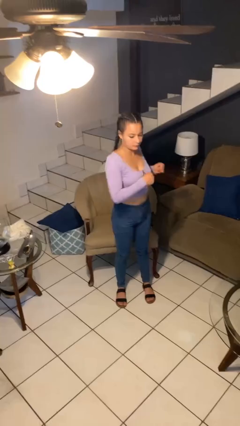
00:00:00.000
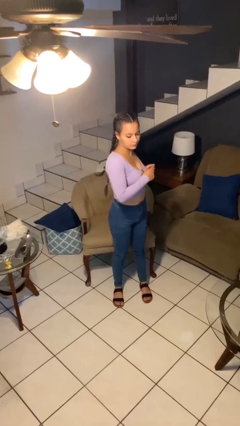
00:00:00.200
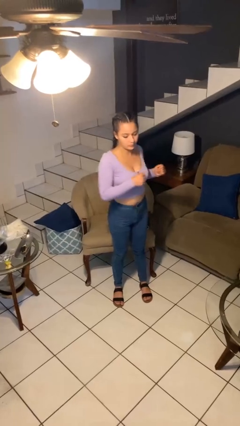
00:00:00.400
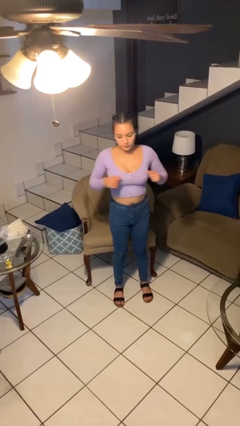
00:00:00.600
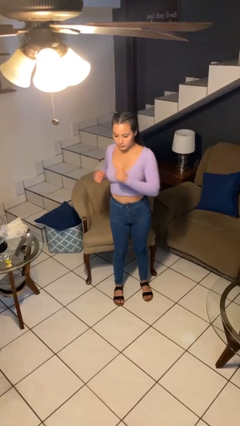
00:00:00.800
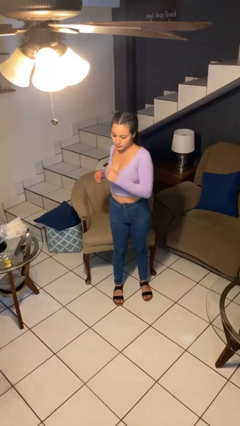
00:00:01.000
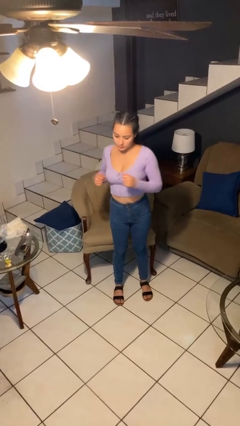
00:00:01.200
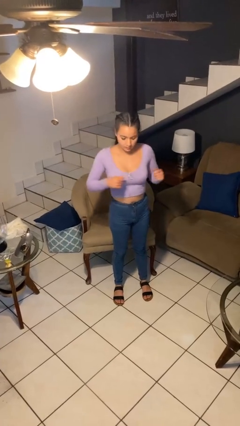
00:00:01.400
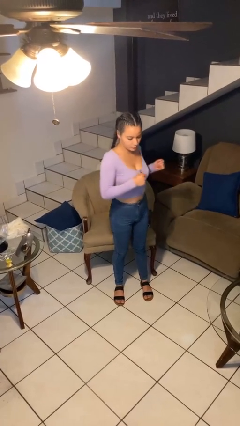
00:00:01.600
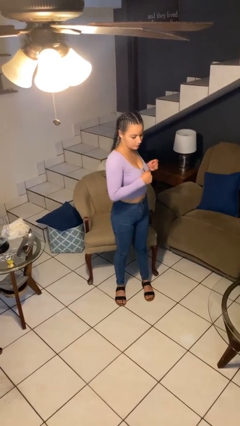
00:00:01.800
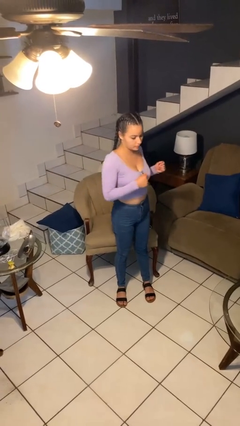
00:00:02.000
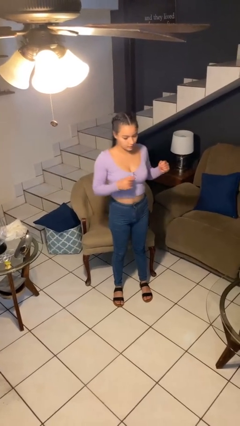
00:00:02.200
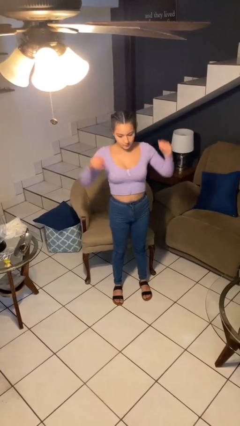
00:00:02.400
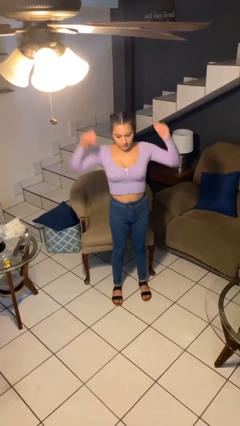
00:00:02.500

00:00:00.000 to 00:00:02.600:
person stretches arms to side

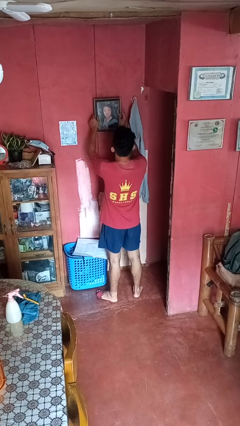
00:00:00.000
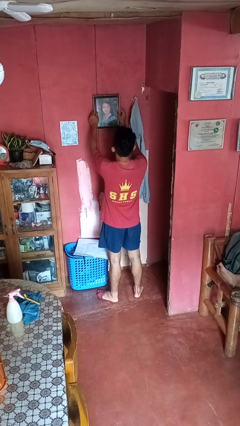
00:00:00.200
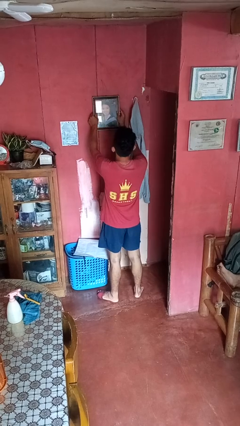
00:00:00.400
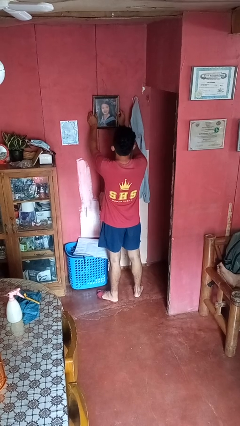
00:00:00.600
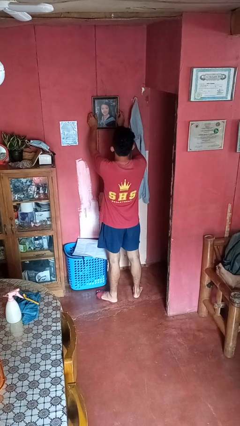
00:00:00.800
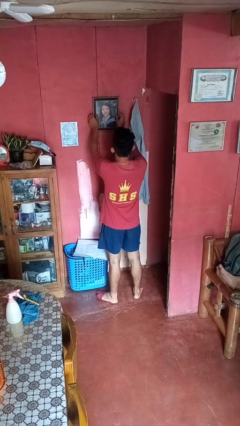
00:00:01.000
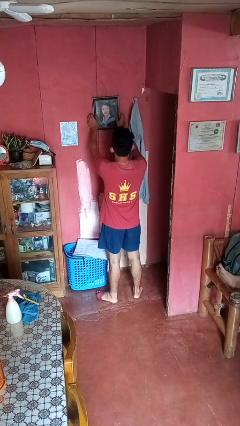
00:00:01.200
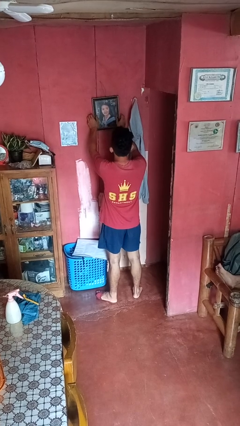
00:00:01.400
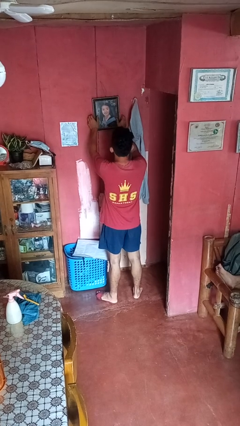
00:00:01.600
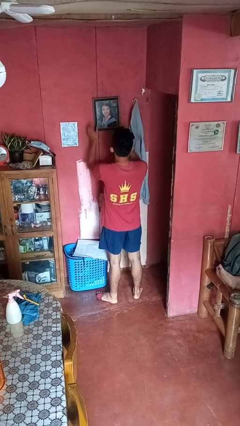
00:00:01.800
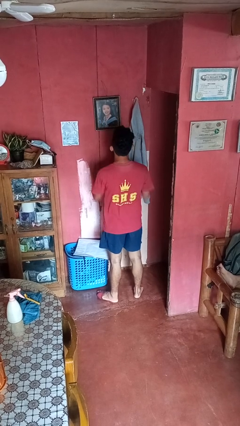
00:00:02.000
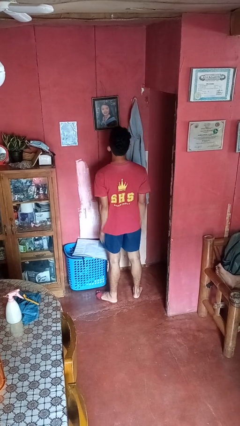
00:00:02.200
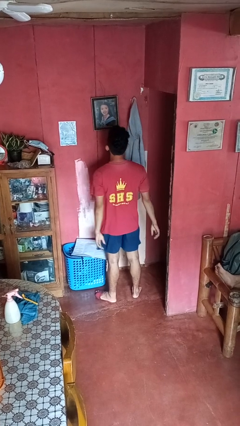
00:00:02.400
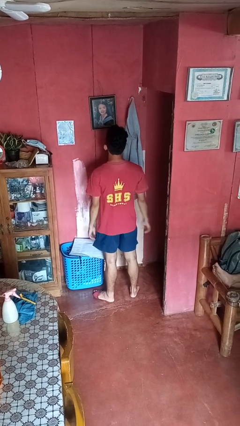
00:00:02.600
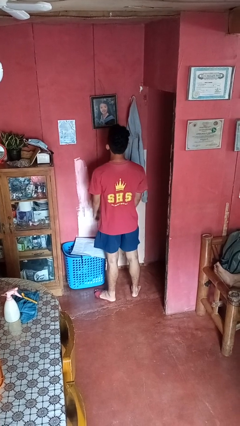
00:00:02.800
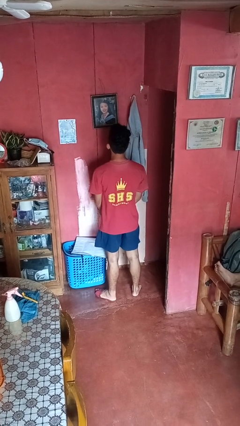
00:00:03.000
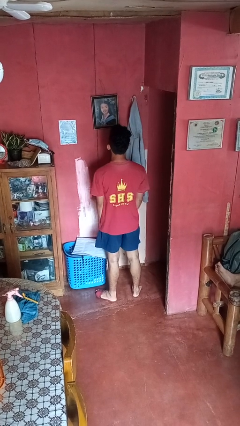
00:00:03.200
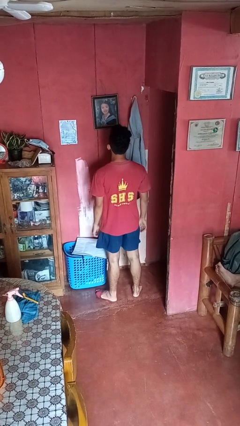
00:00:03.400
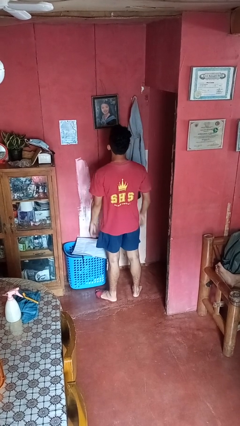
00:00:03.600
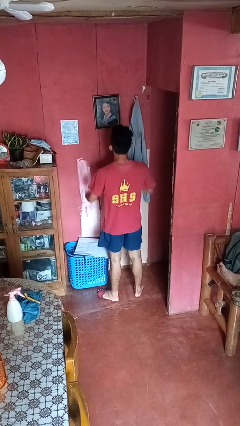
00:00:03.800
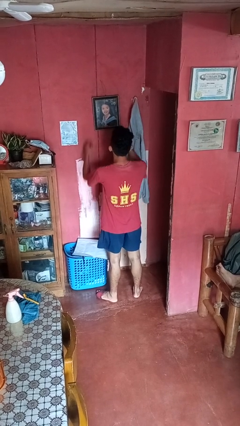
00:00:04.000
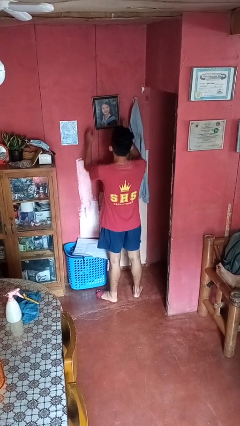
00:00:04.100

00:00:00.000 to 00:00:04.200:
person puts up picture frame

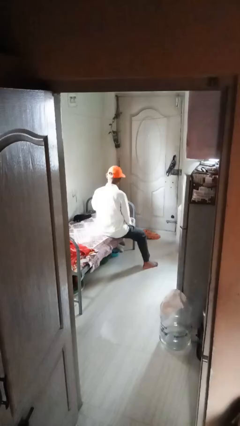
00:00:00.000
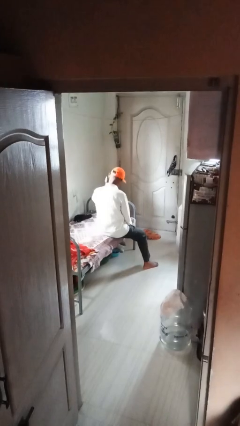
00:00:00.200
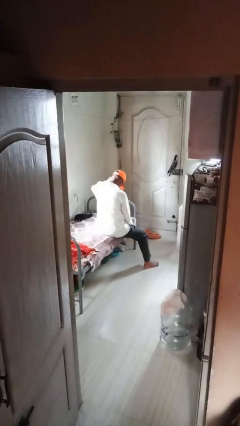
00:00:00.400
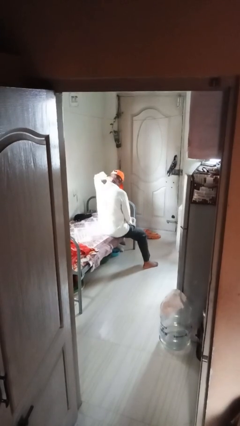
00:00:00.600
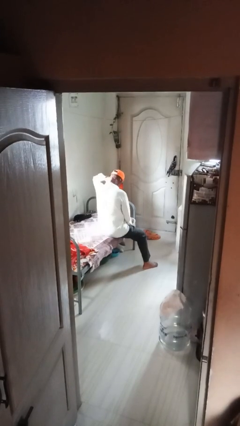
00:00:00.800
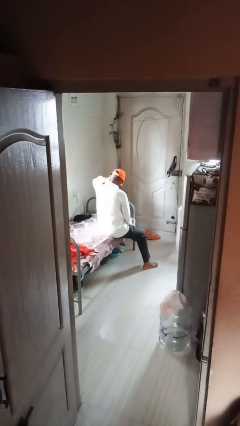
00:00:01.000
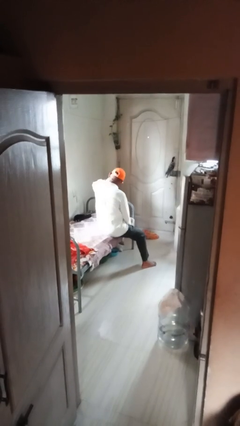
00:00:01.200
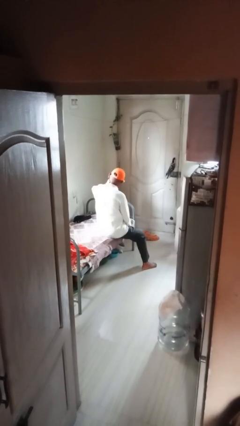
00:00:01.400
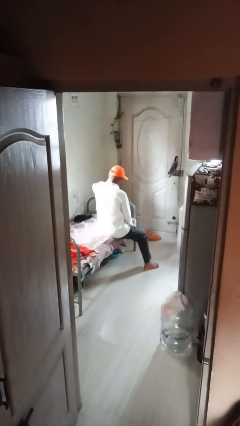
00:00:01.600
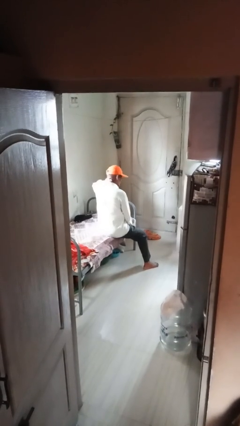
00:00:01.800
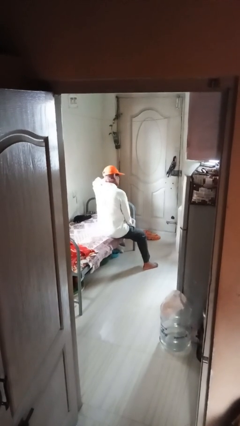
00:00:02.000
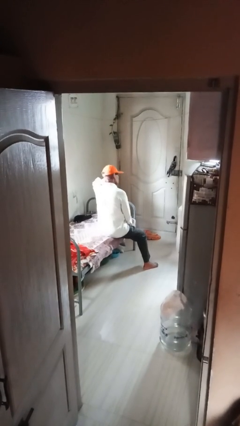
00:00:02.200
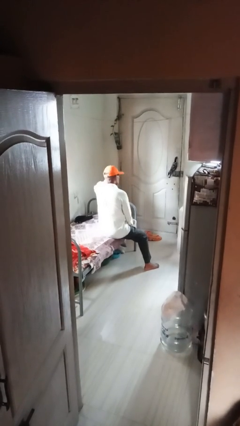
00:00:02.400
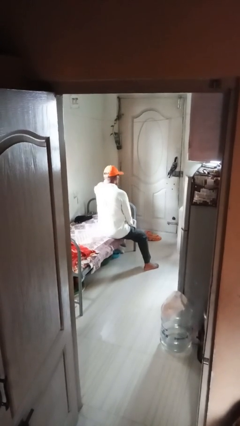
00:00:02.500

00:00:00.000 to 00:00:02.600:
person rubs neck

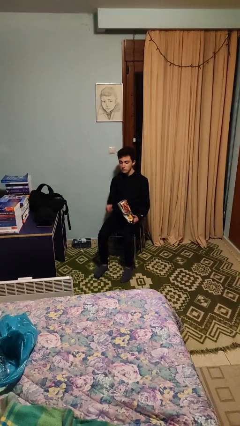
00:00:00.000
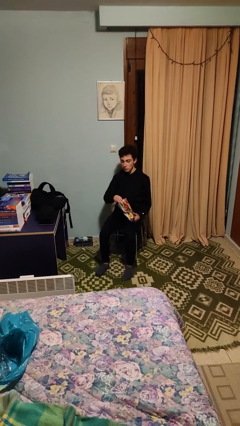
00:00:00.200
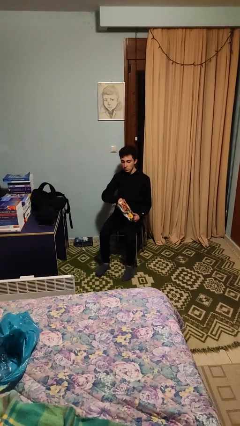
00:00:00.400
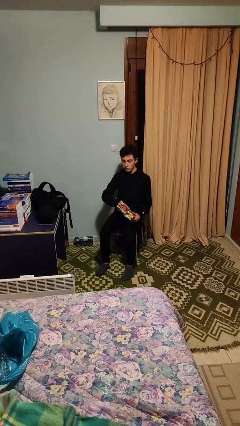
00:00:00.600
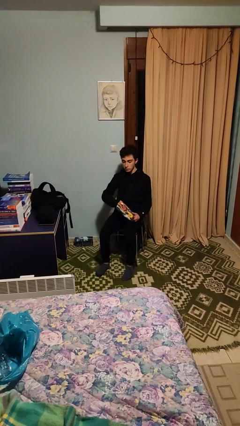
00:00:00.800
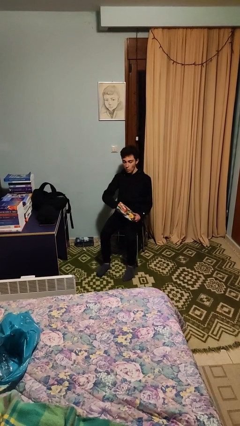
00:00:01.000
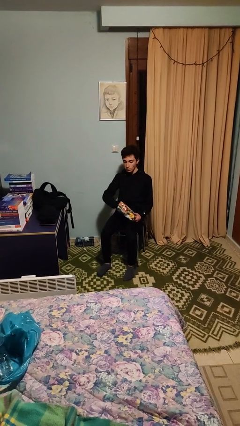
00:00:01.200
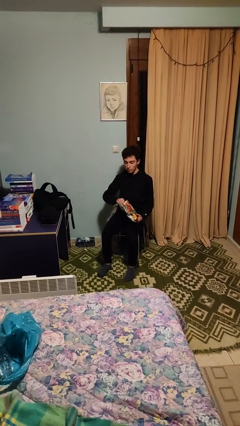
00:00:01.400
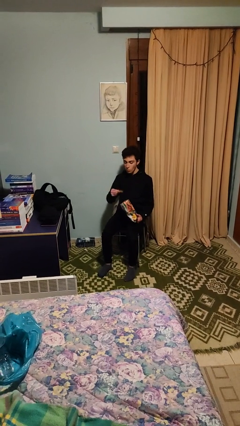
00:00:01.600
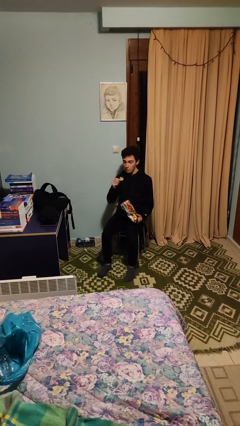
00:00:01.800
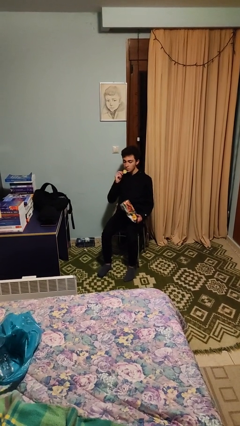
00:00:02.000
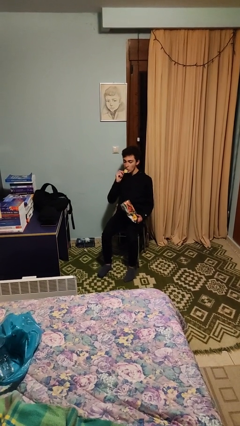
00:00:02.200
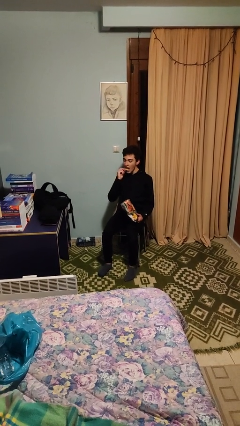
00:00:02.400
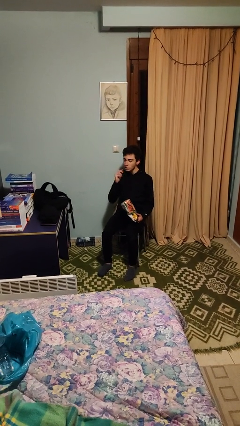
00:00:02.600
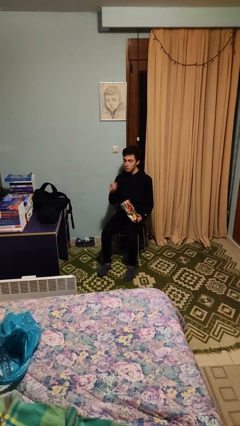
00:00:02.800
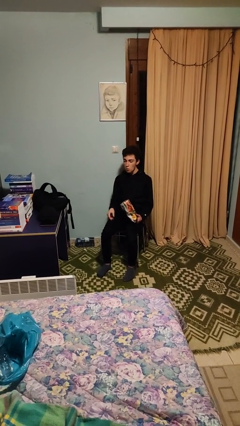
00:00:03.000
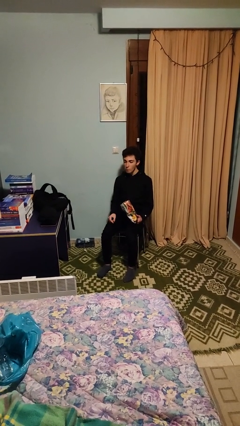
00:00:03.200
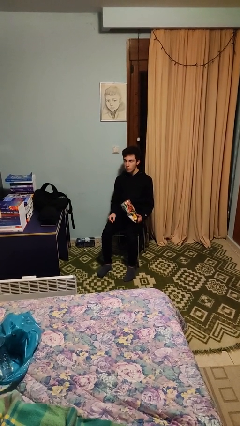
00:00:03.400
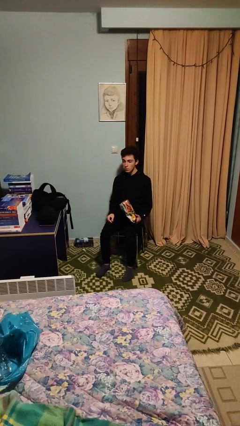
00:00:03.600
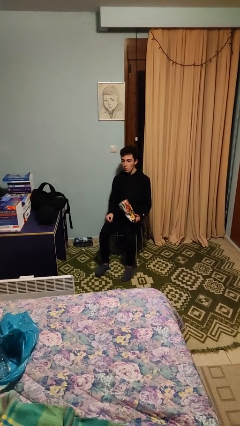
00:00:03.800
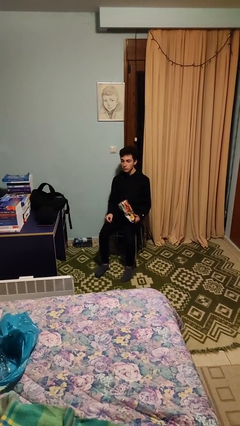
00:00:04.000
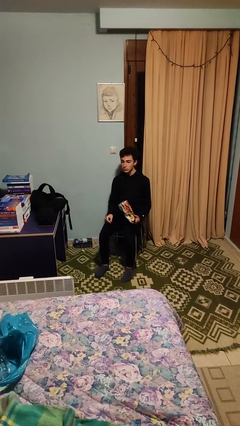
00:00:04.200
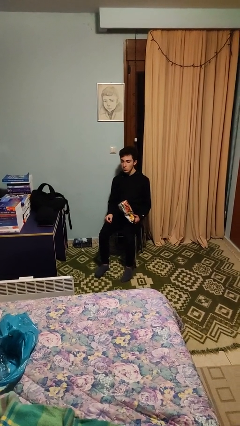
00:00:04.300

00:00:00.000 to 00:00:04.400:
person eats snack from bag

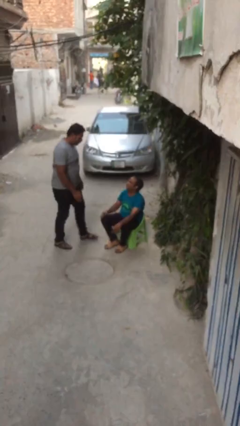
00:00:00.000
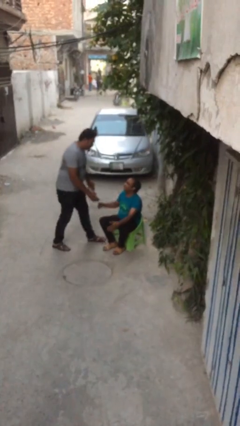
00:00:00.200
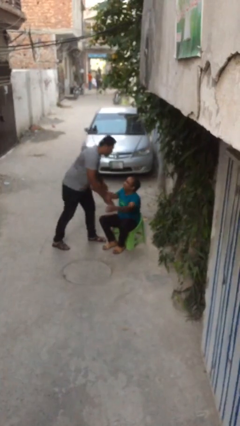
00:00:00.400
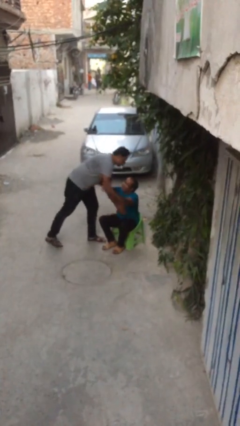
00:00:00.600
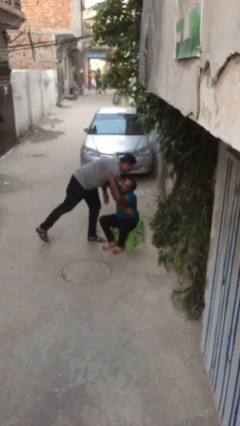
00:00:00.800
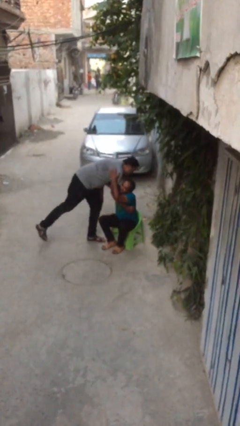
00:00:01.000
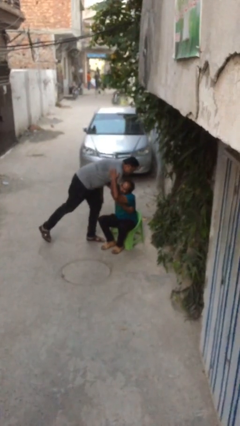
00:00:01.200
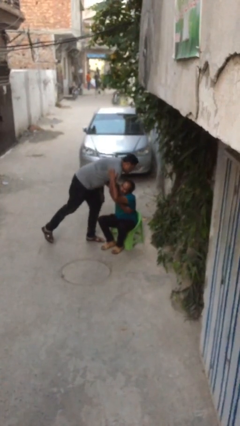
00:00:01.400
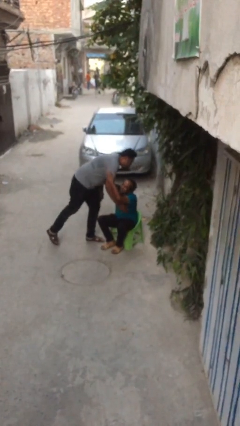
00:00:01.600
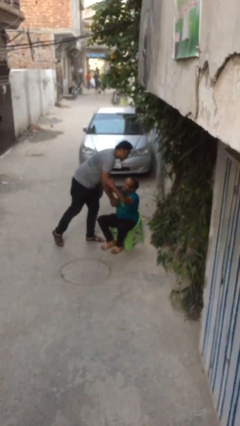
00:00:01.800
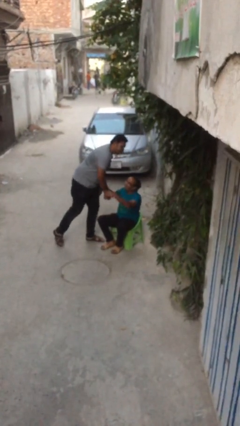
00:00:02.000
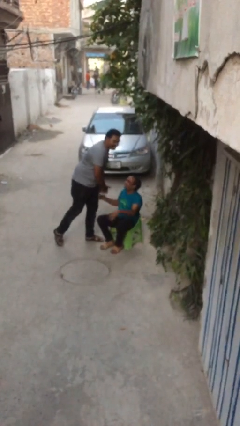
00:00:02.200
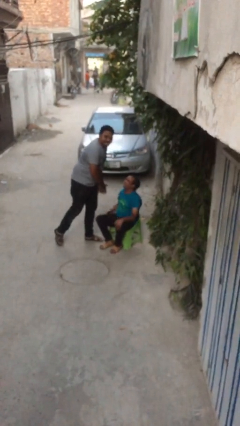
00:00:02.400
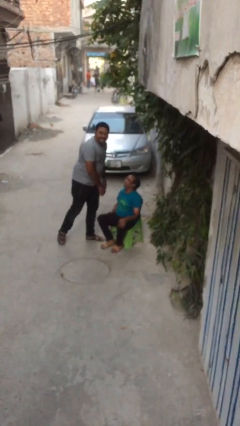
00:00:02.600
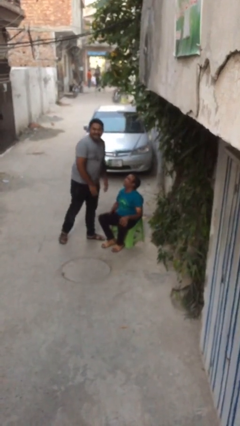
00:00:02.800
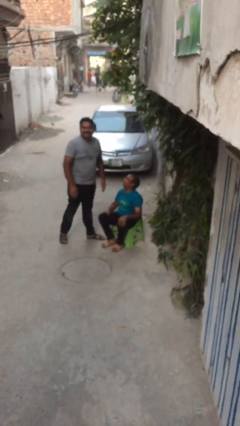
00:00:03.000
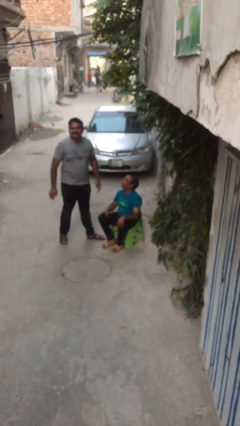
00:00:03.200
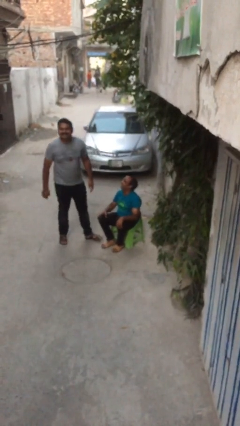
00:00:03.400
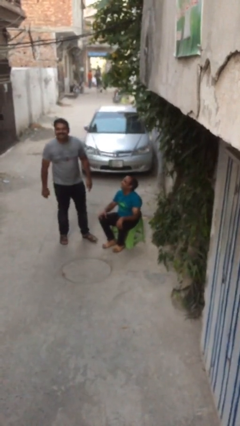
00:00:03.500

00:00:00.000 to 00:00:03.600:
person embraces person
